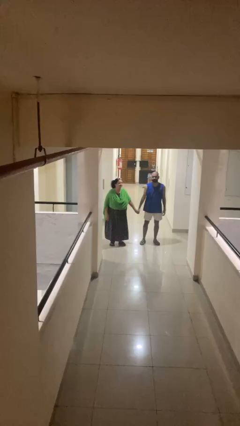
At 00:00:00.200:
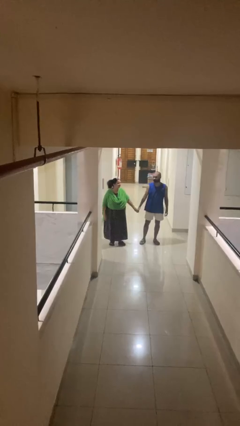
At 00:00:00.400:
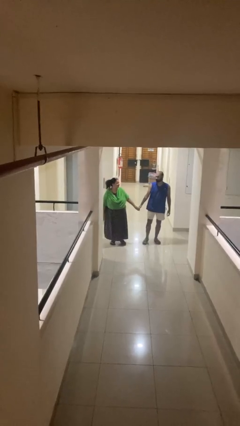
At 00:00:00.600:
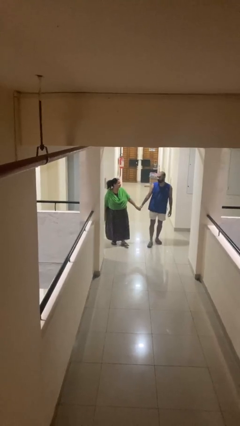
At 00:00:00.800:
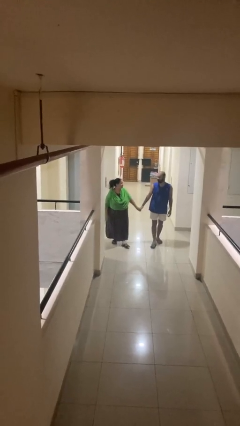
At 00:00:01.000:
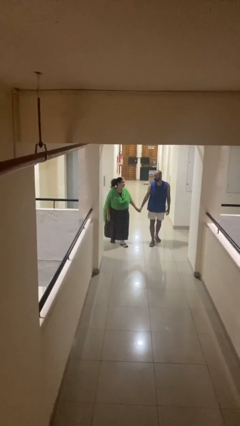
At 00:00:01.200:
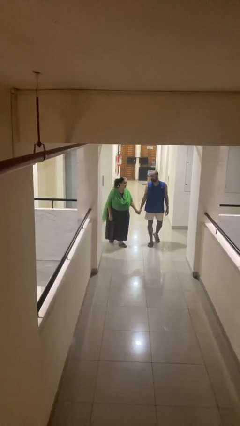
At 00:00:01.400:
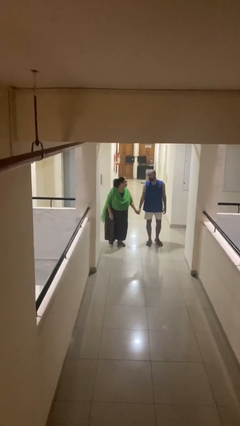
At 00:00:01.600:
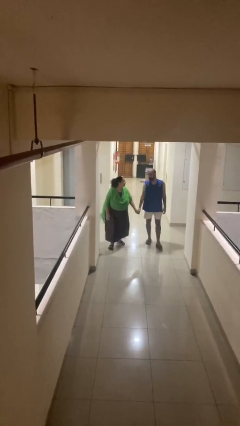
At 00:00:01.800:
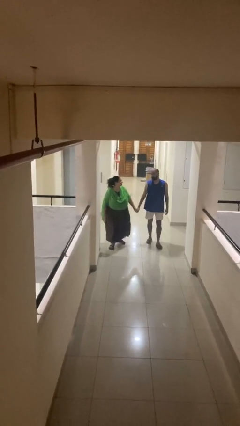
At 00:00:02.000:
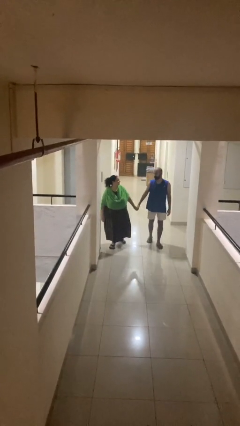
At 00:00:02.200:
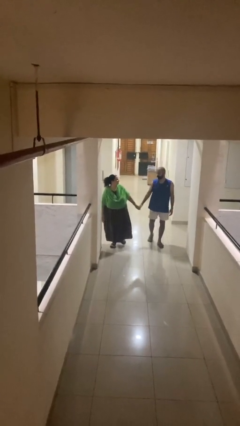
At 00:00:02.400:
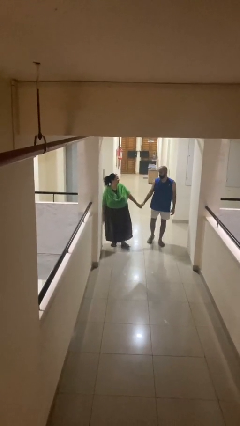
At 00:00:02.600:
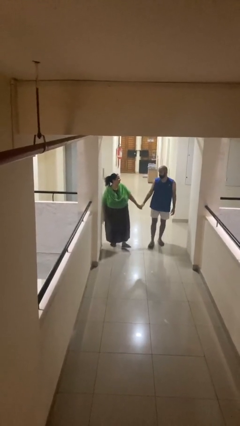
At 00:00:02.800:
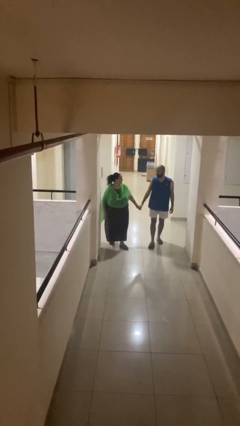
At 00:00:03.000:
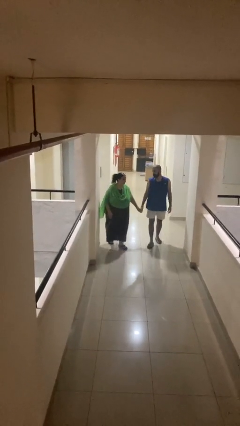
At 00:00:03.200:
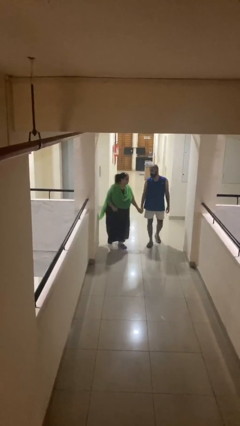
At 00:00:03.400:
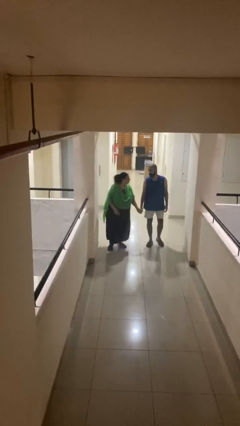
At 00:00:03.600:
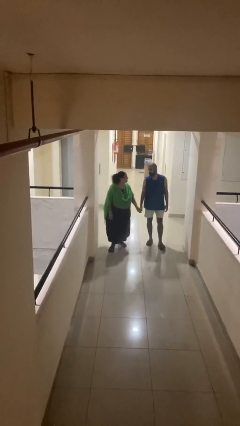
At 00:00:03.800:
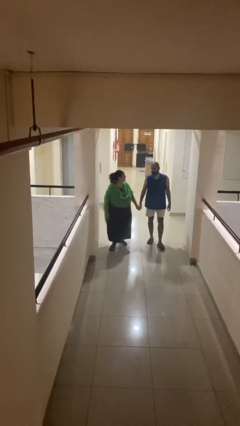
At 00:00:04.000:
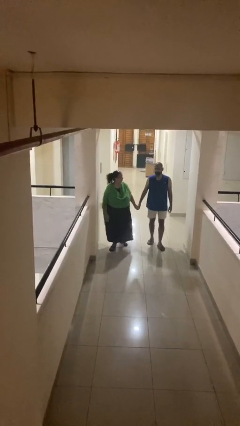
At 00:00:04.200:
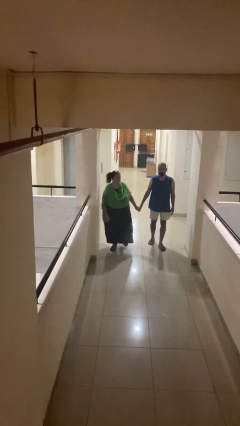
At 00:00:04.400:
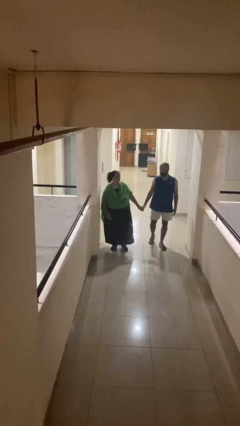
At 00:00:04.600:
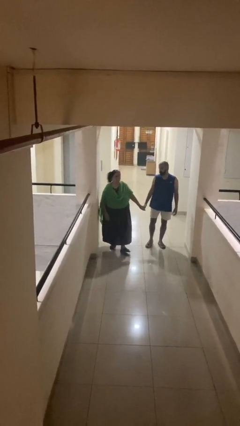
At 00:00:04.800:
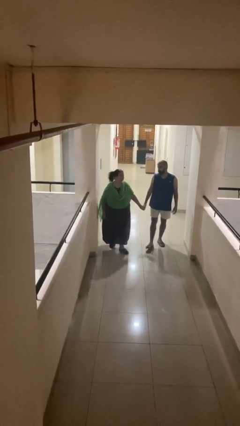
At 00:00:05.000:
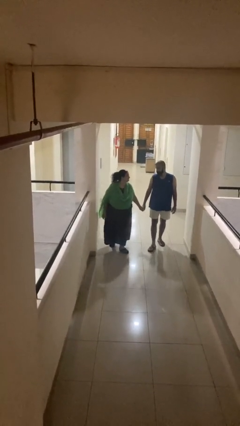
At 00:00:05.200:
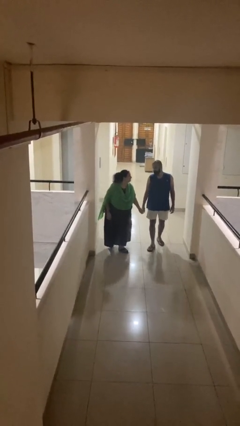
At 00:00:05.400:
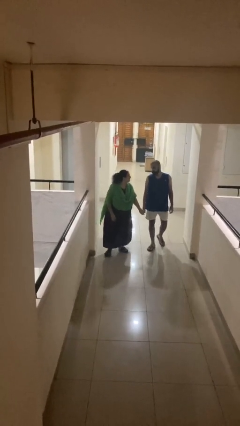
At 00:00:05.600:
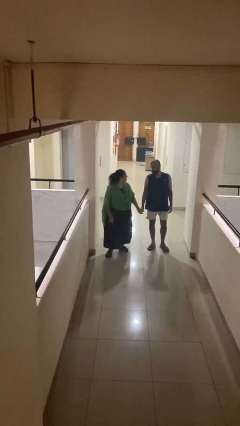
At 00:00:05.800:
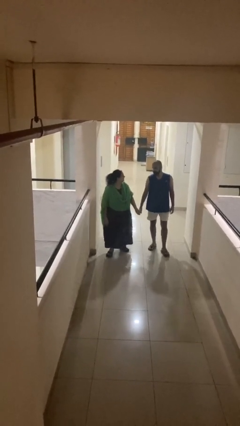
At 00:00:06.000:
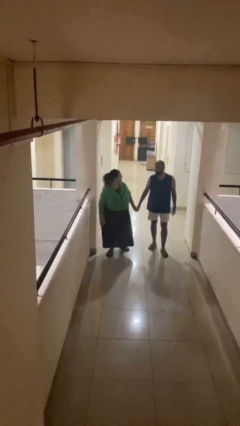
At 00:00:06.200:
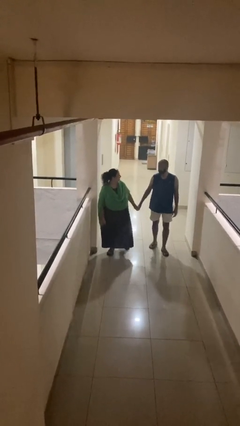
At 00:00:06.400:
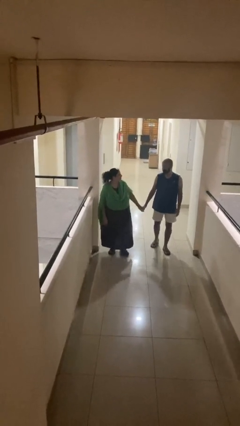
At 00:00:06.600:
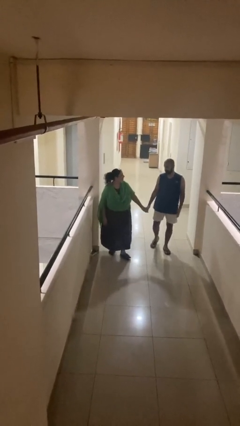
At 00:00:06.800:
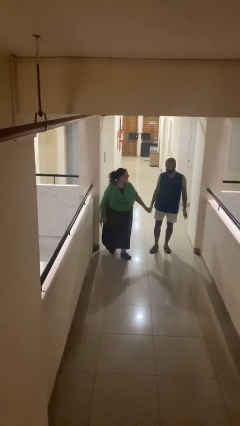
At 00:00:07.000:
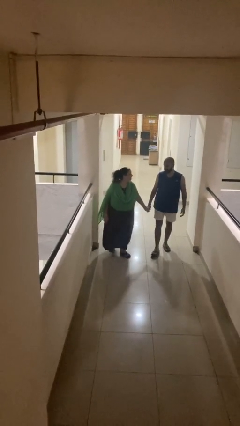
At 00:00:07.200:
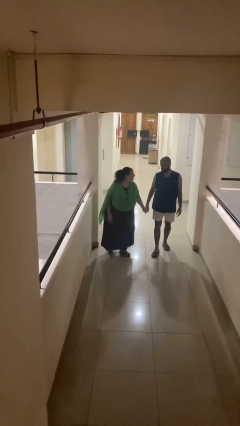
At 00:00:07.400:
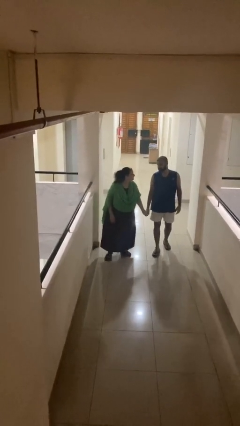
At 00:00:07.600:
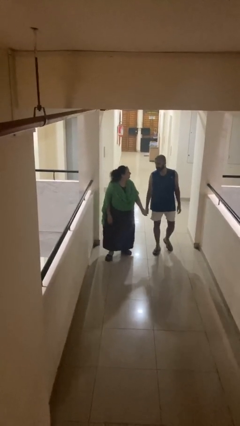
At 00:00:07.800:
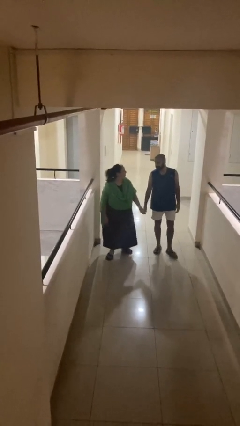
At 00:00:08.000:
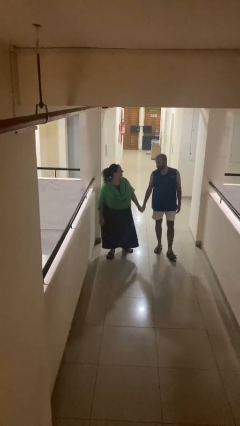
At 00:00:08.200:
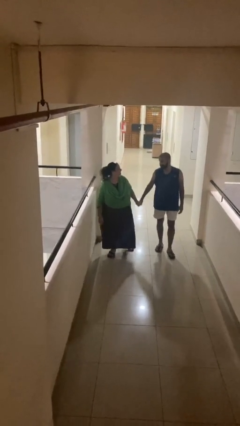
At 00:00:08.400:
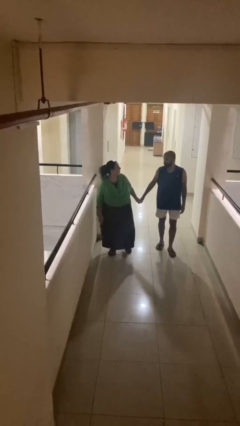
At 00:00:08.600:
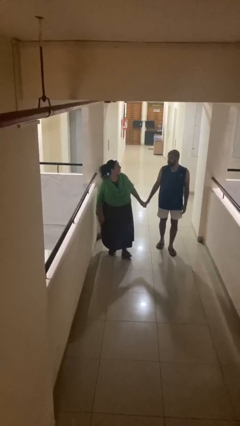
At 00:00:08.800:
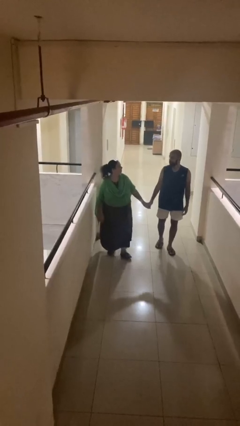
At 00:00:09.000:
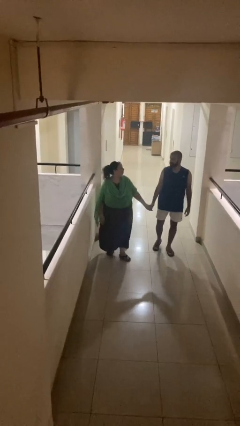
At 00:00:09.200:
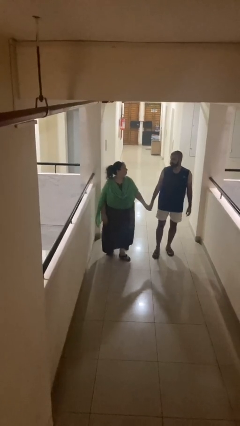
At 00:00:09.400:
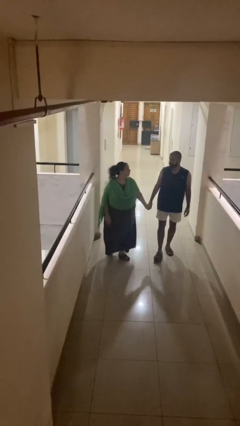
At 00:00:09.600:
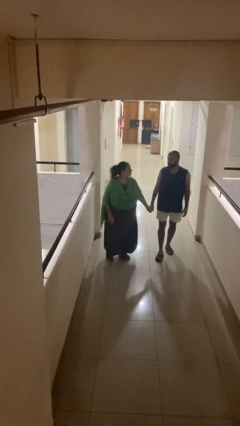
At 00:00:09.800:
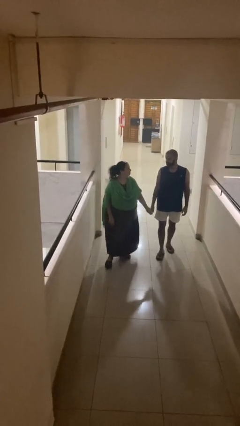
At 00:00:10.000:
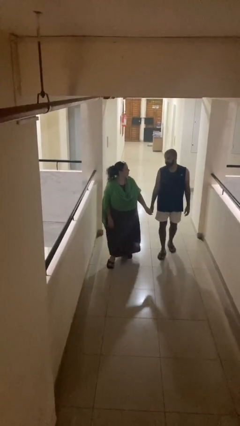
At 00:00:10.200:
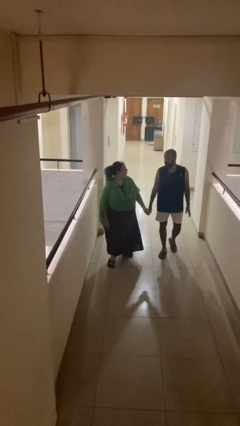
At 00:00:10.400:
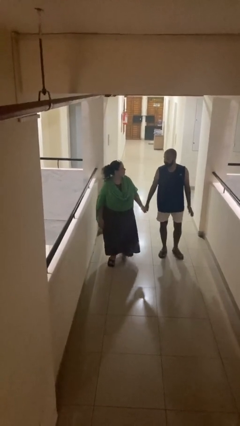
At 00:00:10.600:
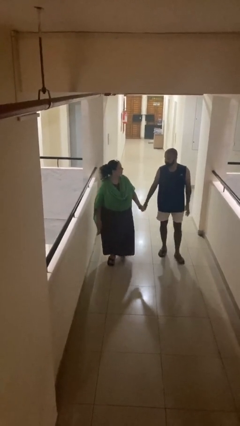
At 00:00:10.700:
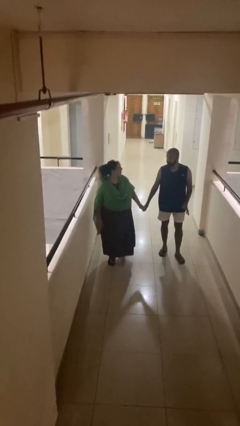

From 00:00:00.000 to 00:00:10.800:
person holds hand

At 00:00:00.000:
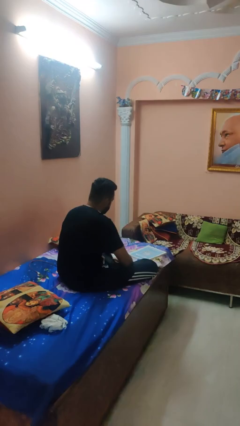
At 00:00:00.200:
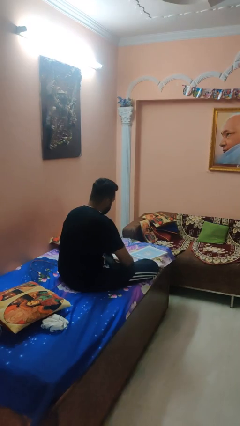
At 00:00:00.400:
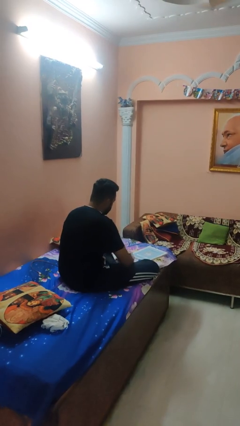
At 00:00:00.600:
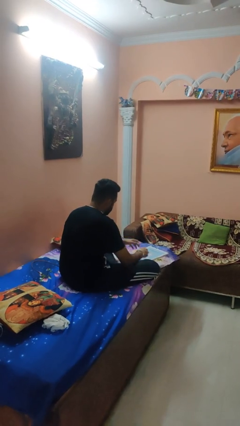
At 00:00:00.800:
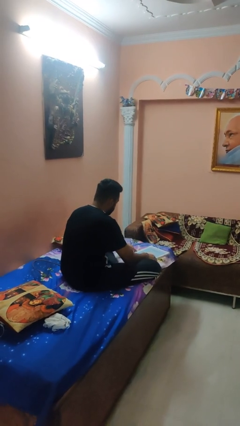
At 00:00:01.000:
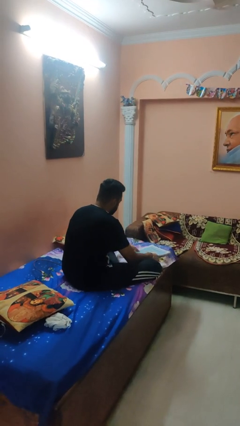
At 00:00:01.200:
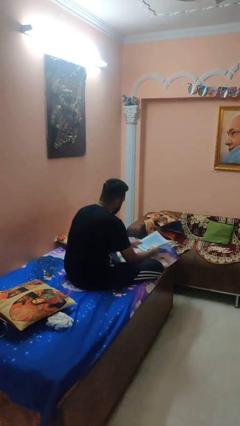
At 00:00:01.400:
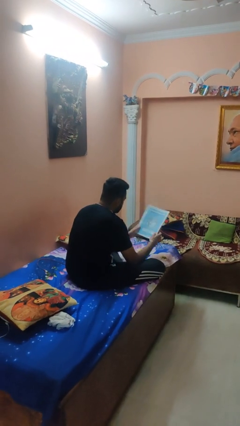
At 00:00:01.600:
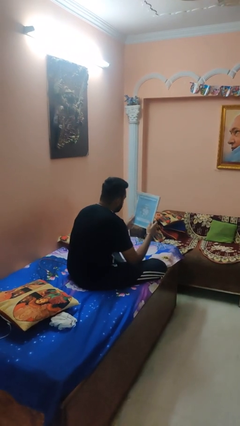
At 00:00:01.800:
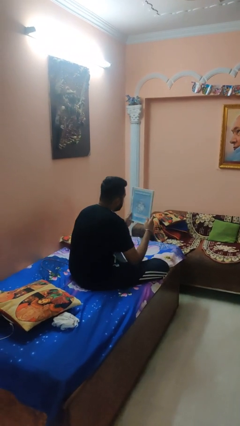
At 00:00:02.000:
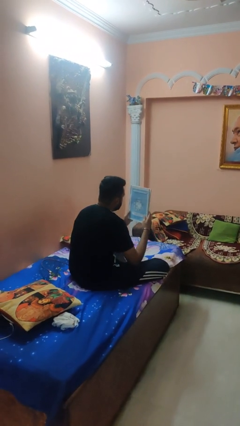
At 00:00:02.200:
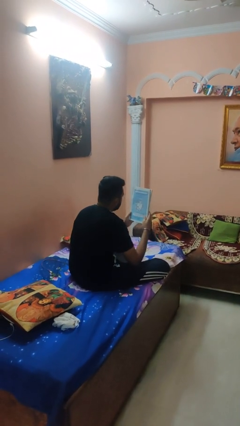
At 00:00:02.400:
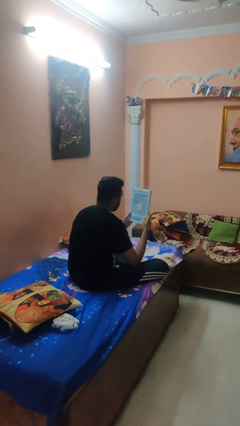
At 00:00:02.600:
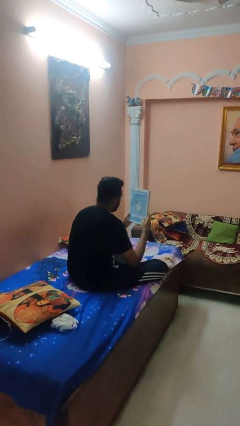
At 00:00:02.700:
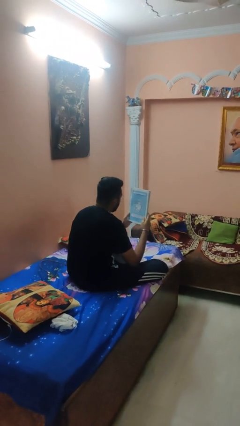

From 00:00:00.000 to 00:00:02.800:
person picks up object from bed

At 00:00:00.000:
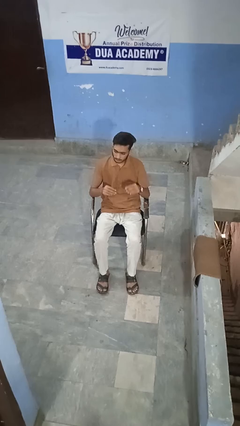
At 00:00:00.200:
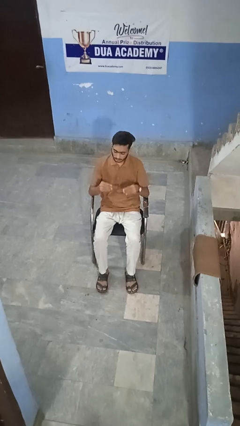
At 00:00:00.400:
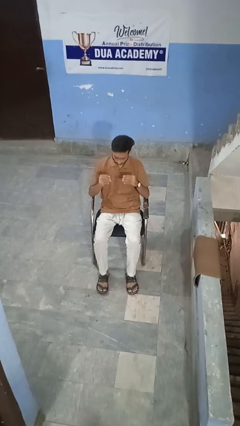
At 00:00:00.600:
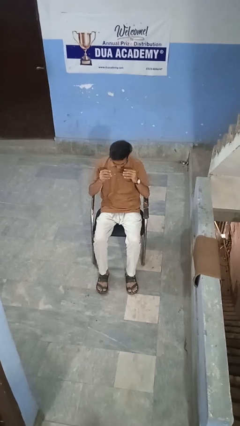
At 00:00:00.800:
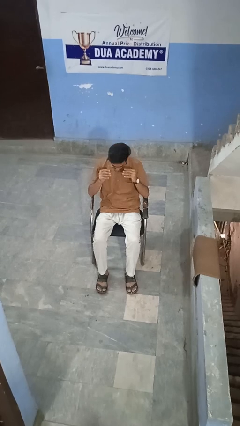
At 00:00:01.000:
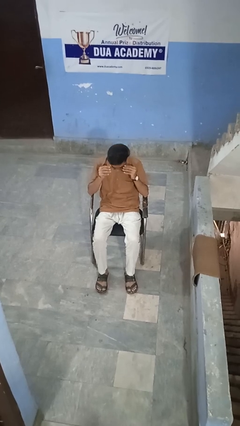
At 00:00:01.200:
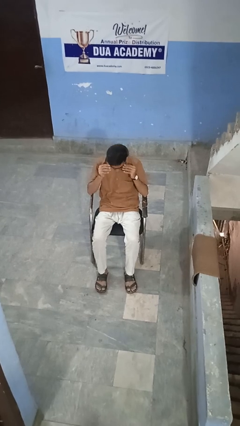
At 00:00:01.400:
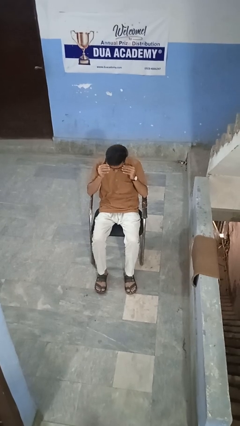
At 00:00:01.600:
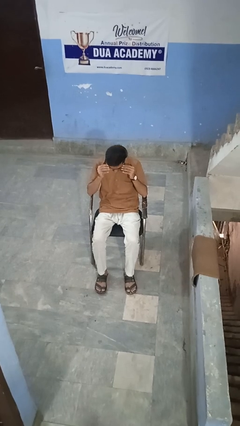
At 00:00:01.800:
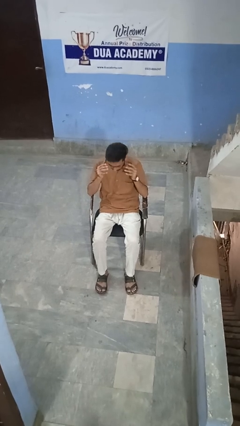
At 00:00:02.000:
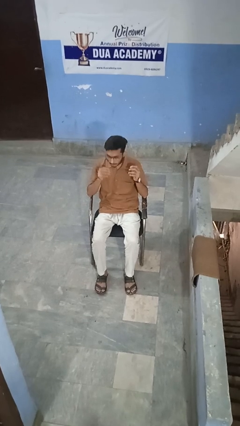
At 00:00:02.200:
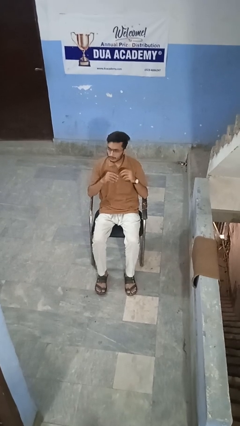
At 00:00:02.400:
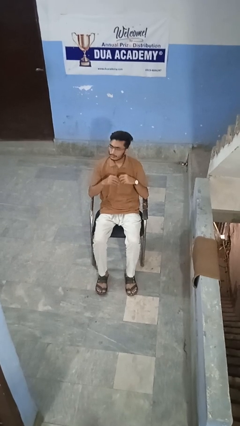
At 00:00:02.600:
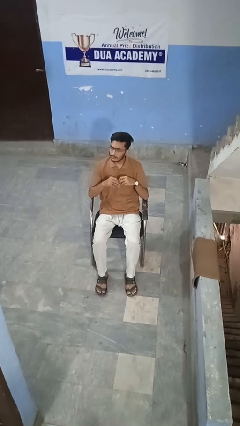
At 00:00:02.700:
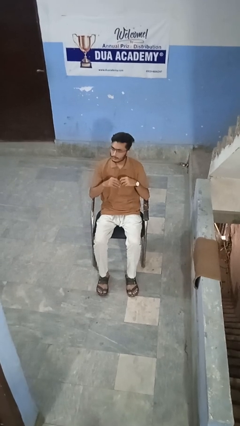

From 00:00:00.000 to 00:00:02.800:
person puts on glasses

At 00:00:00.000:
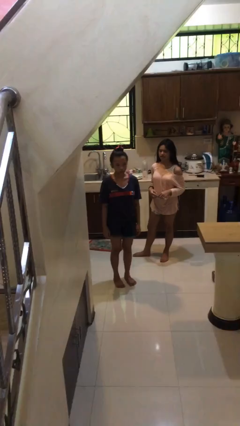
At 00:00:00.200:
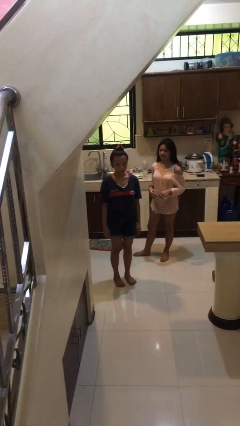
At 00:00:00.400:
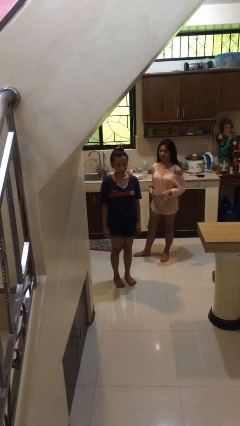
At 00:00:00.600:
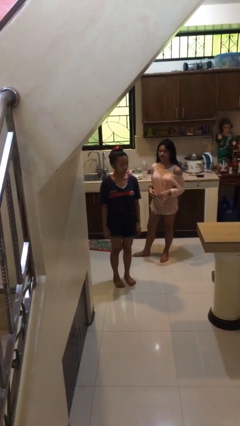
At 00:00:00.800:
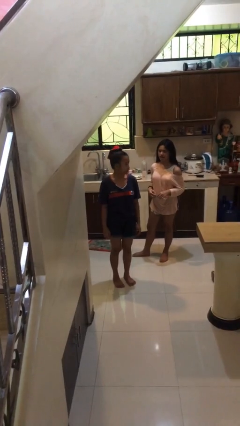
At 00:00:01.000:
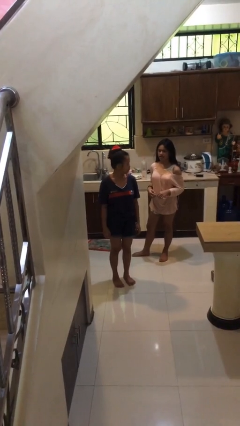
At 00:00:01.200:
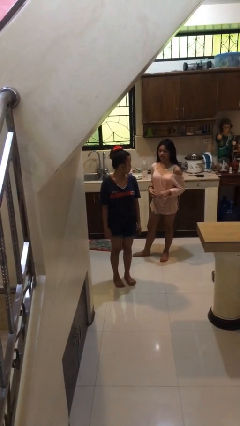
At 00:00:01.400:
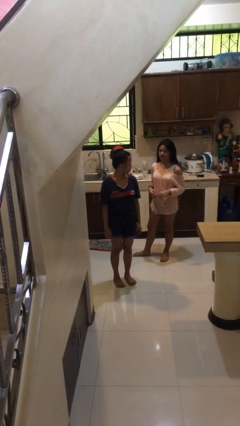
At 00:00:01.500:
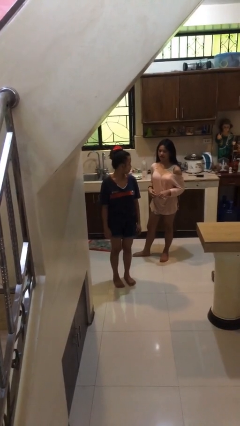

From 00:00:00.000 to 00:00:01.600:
person looks over shoulder
